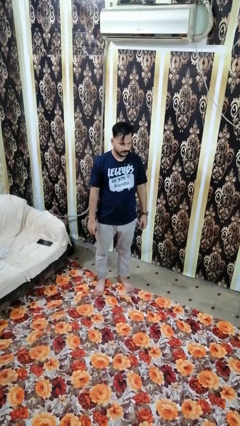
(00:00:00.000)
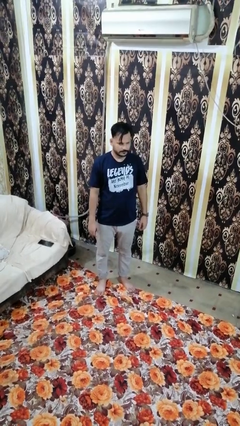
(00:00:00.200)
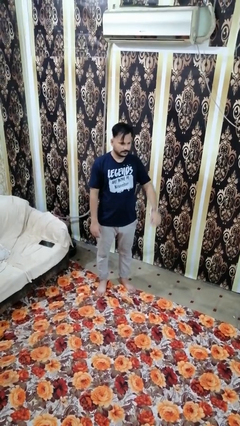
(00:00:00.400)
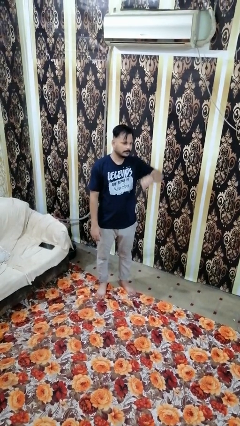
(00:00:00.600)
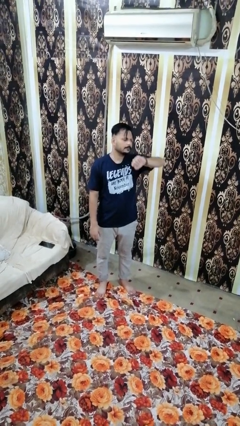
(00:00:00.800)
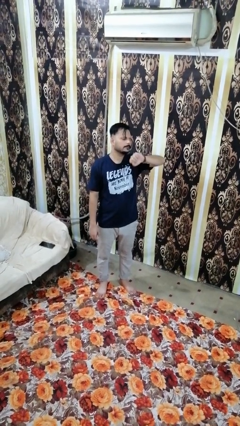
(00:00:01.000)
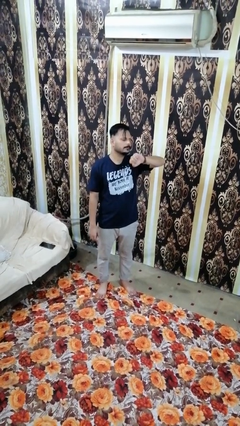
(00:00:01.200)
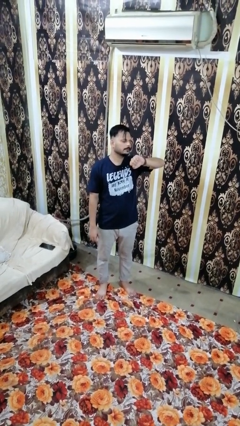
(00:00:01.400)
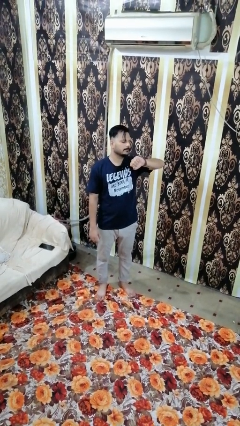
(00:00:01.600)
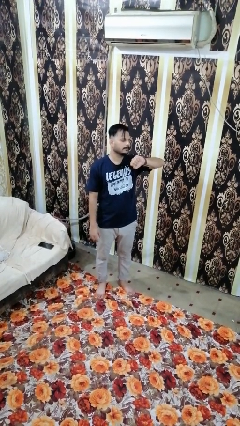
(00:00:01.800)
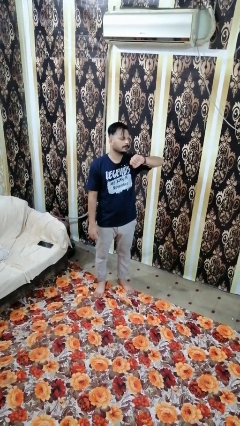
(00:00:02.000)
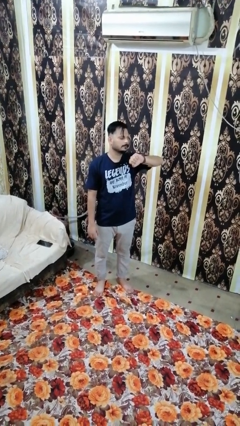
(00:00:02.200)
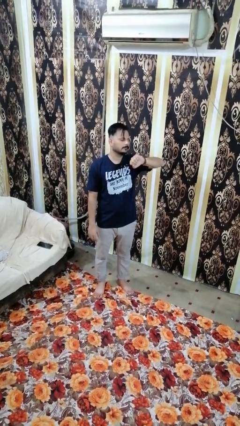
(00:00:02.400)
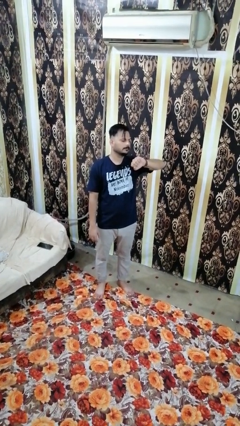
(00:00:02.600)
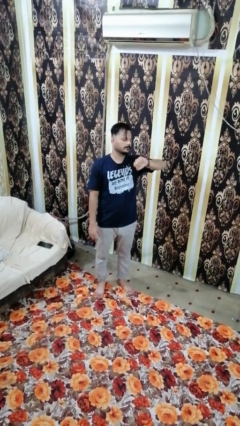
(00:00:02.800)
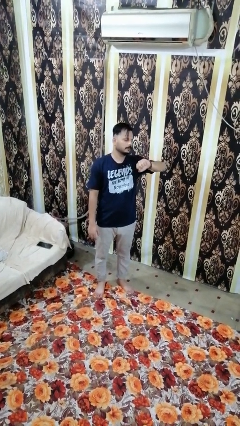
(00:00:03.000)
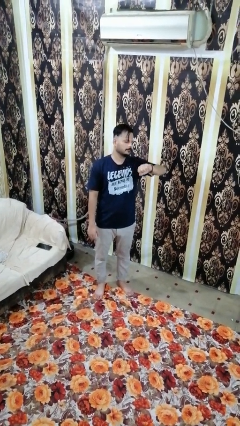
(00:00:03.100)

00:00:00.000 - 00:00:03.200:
person looks at wristwatch

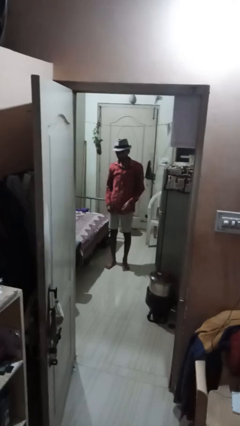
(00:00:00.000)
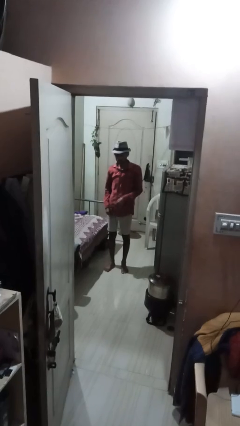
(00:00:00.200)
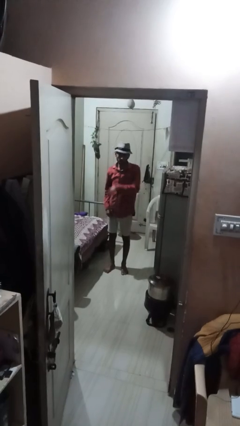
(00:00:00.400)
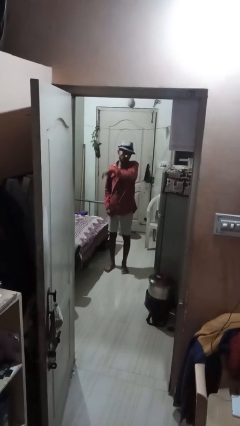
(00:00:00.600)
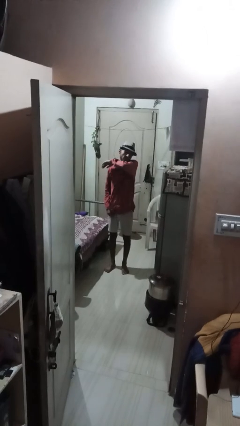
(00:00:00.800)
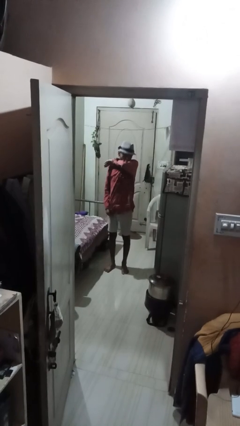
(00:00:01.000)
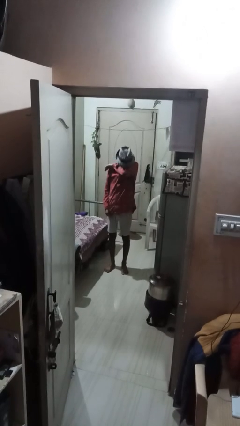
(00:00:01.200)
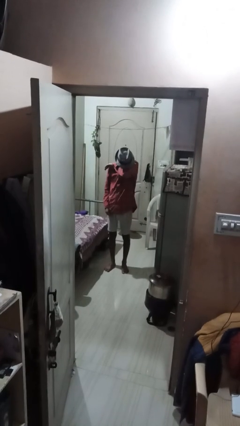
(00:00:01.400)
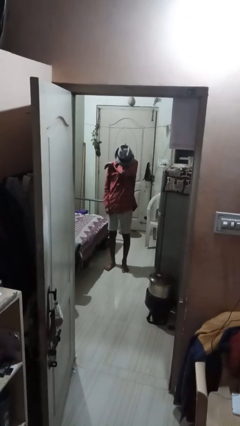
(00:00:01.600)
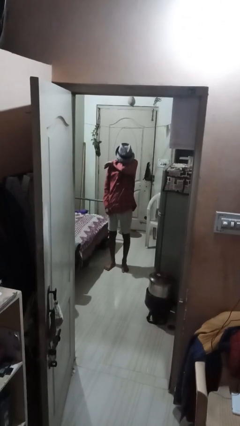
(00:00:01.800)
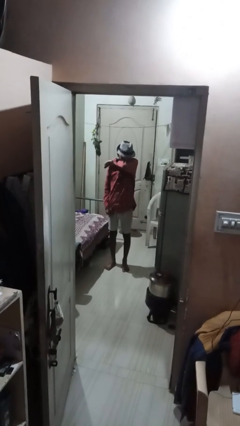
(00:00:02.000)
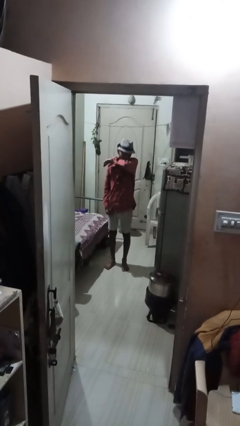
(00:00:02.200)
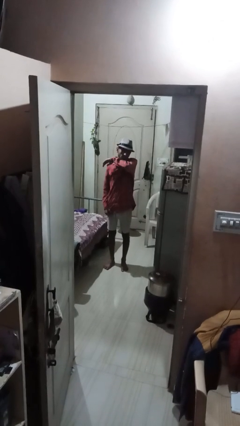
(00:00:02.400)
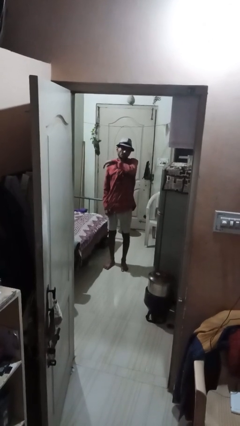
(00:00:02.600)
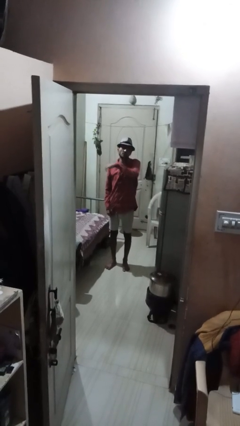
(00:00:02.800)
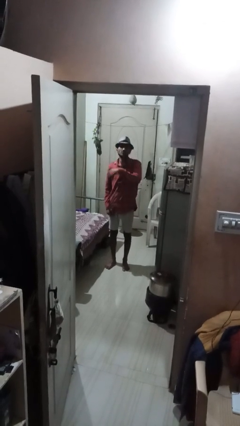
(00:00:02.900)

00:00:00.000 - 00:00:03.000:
person sneezes into arm

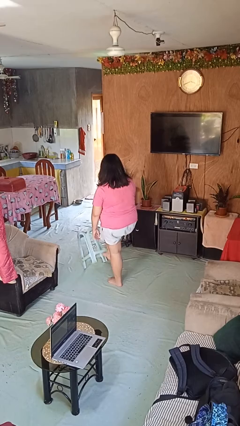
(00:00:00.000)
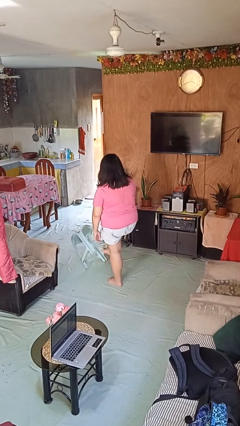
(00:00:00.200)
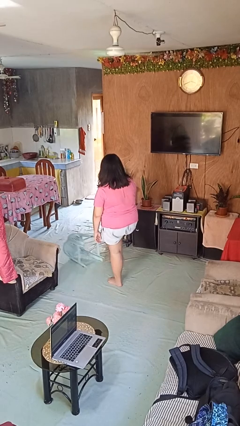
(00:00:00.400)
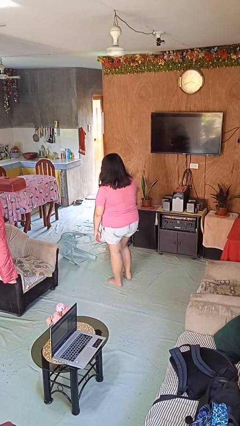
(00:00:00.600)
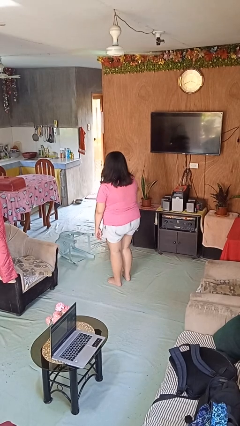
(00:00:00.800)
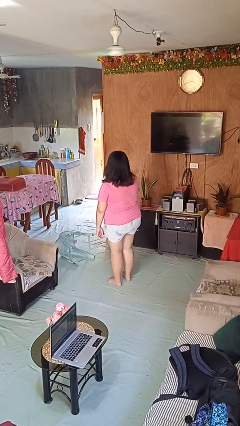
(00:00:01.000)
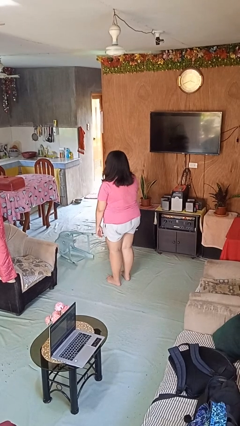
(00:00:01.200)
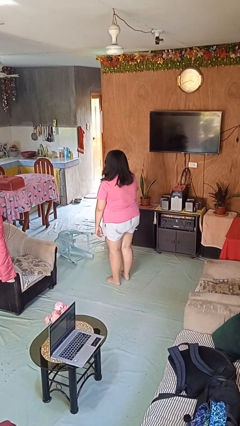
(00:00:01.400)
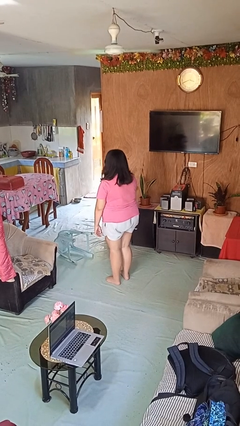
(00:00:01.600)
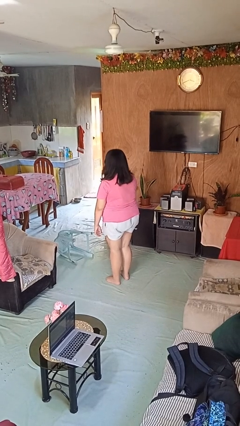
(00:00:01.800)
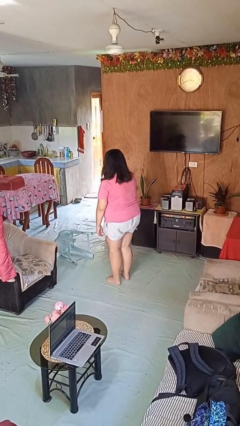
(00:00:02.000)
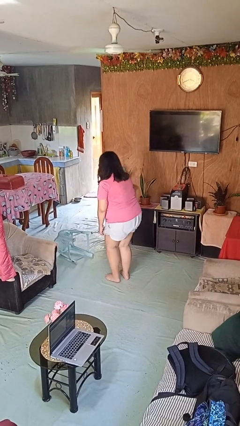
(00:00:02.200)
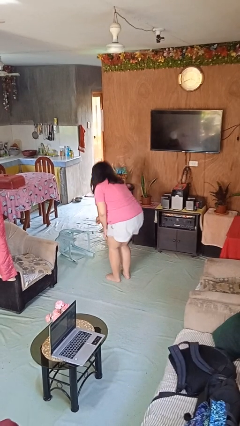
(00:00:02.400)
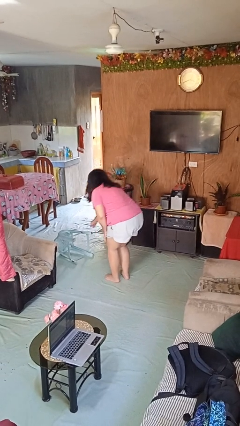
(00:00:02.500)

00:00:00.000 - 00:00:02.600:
person knocks over furniture

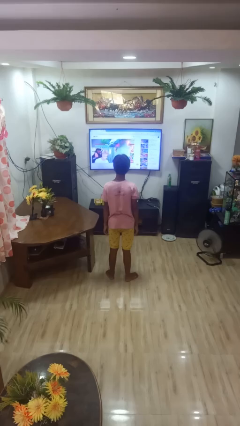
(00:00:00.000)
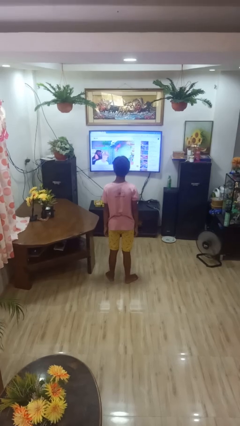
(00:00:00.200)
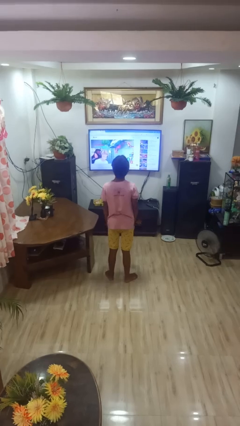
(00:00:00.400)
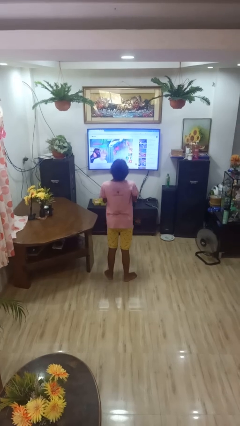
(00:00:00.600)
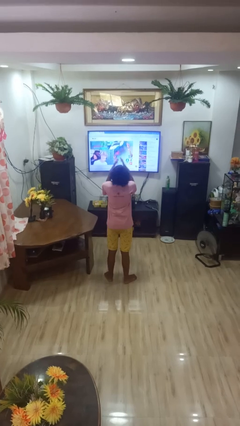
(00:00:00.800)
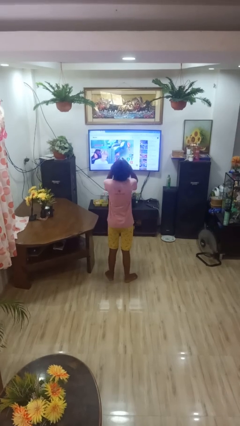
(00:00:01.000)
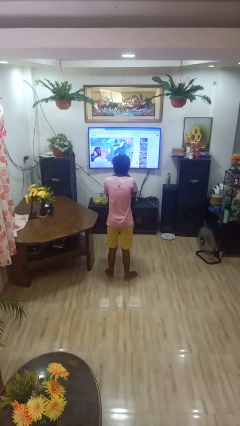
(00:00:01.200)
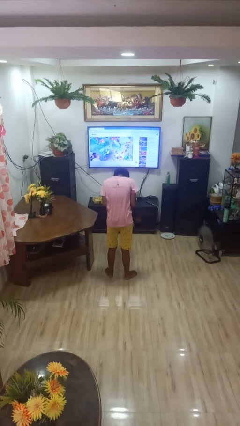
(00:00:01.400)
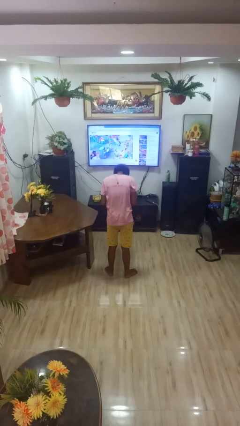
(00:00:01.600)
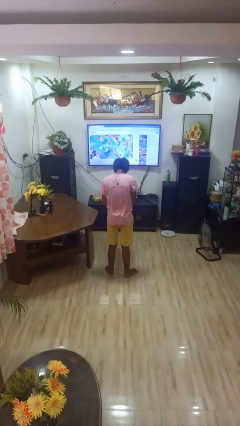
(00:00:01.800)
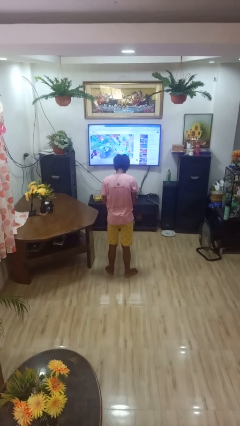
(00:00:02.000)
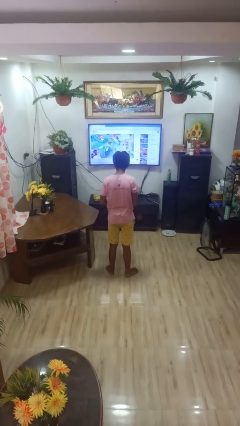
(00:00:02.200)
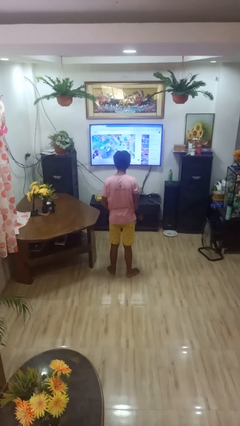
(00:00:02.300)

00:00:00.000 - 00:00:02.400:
person sneezes into hand

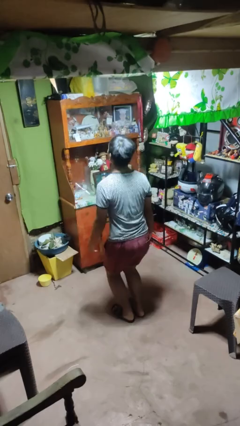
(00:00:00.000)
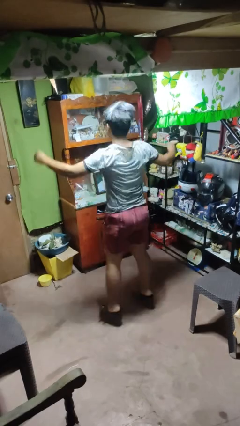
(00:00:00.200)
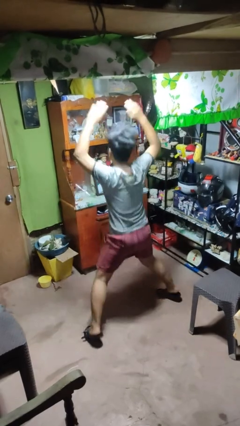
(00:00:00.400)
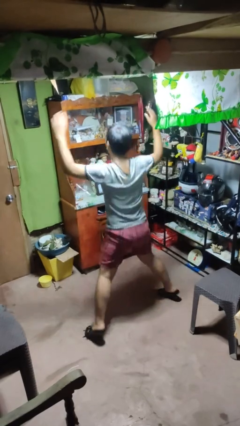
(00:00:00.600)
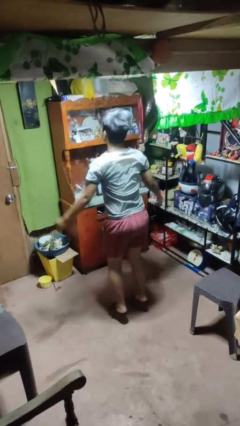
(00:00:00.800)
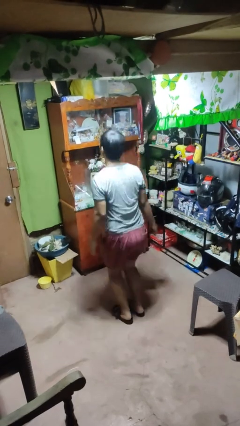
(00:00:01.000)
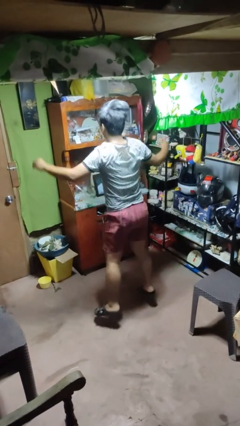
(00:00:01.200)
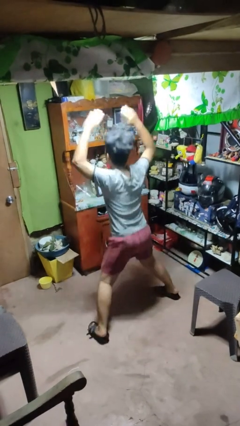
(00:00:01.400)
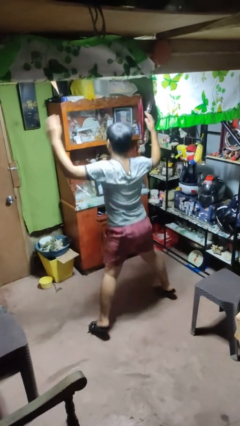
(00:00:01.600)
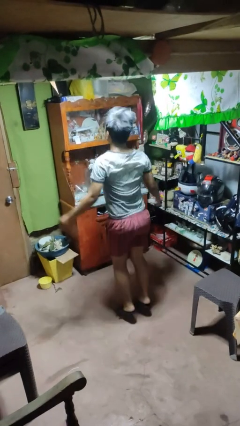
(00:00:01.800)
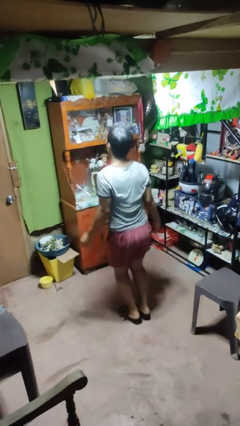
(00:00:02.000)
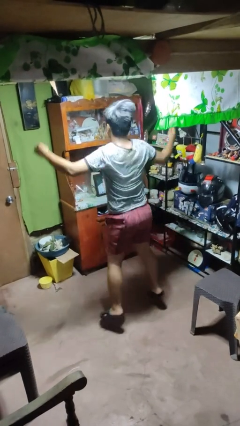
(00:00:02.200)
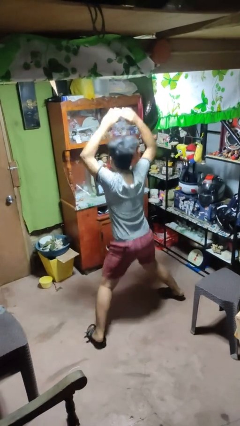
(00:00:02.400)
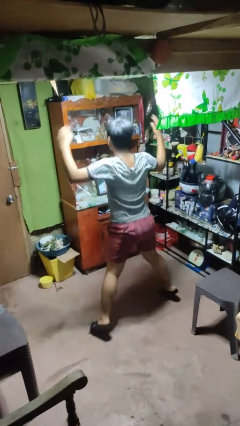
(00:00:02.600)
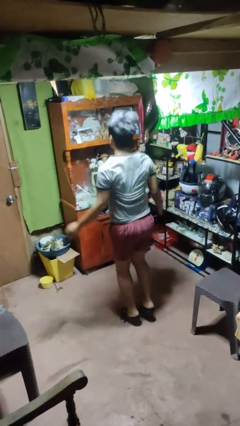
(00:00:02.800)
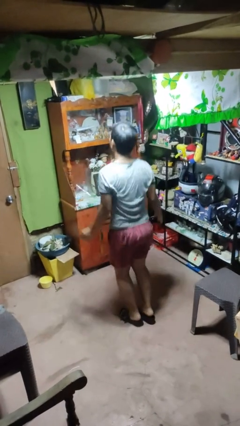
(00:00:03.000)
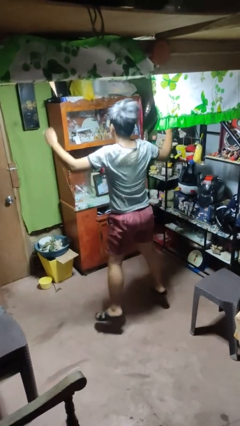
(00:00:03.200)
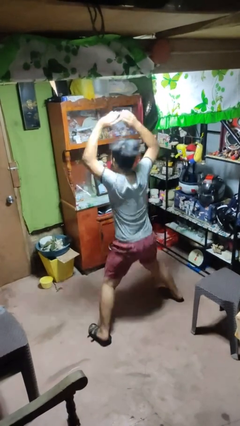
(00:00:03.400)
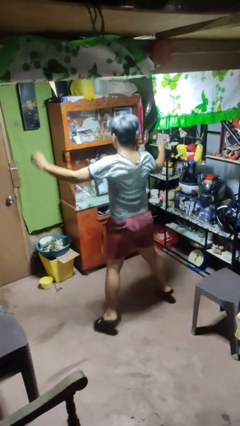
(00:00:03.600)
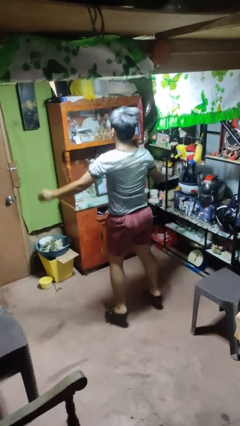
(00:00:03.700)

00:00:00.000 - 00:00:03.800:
person exercises with jumping jacks

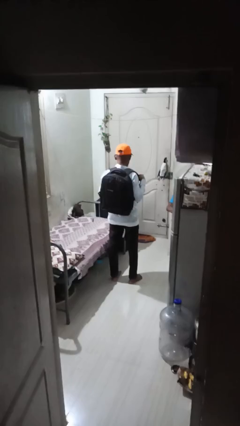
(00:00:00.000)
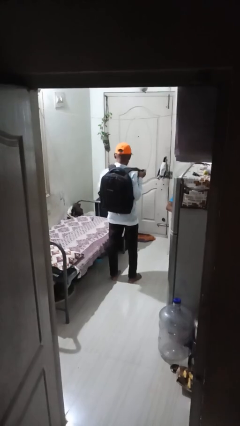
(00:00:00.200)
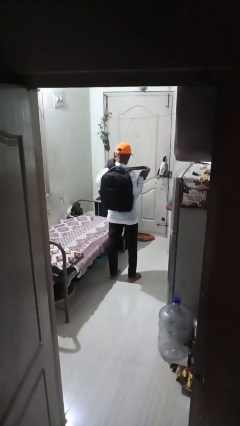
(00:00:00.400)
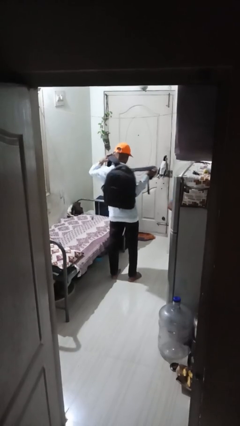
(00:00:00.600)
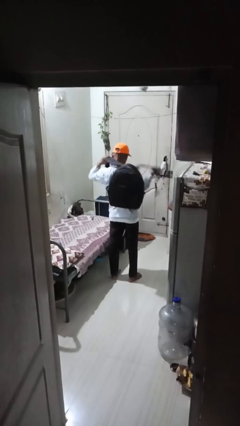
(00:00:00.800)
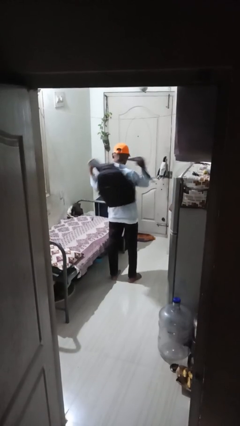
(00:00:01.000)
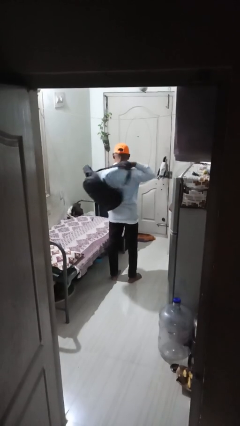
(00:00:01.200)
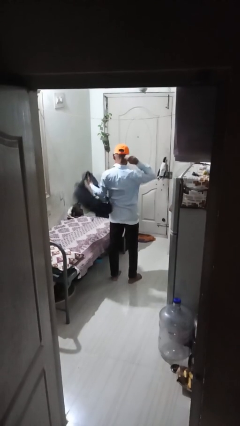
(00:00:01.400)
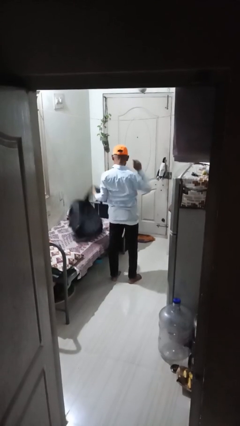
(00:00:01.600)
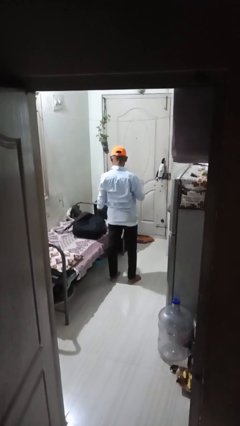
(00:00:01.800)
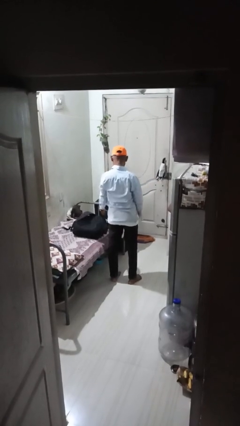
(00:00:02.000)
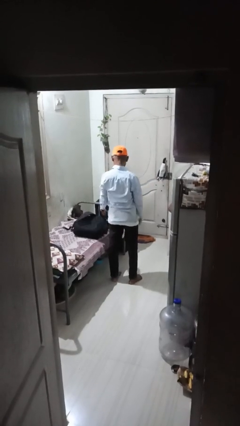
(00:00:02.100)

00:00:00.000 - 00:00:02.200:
person takes off backpack
